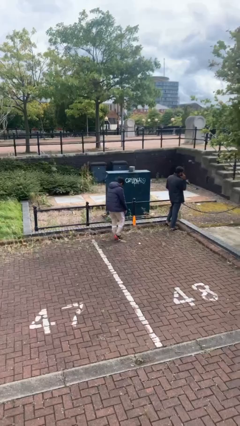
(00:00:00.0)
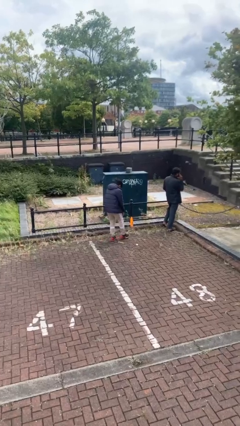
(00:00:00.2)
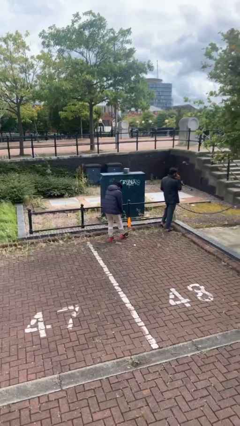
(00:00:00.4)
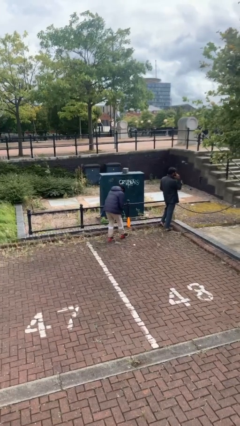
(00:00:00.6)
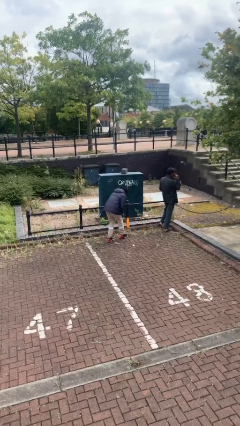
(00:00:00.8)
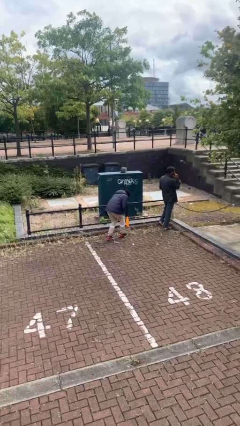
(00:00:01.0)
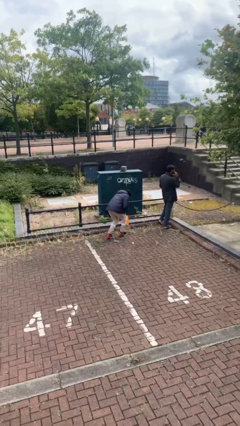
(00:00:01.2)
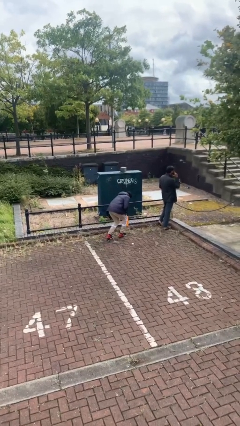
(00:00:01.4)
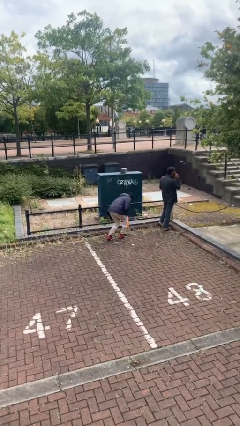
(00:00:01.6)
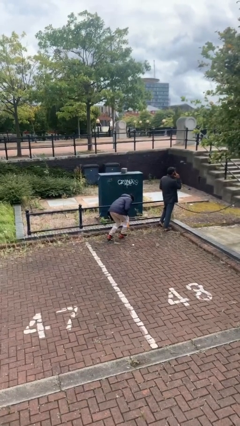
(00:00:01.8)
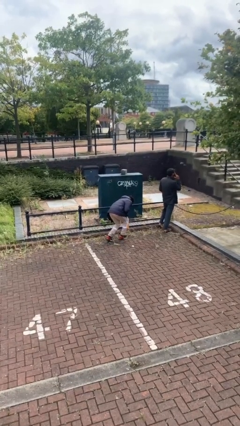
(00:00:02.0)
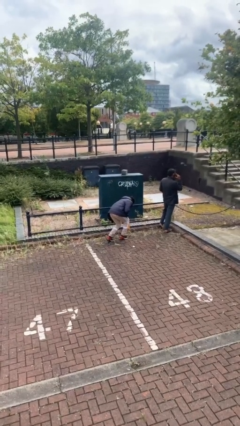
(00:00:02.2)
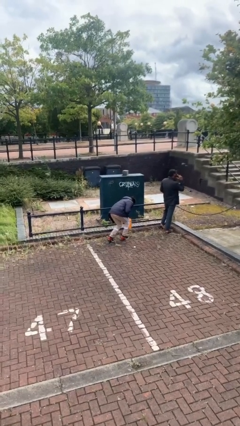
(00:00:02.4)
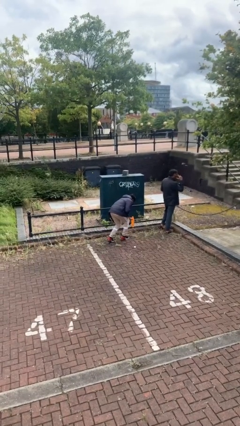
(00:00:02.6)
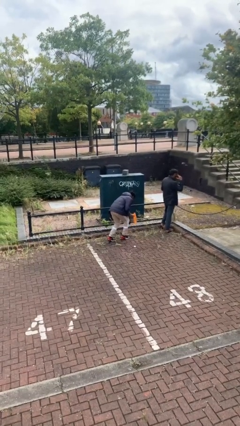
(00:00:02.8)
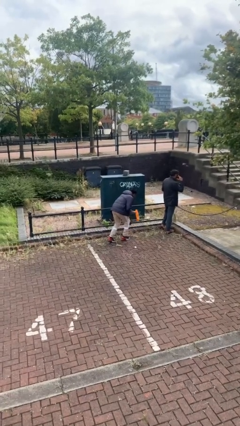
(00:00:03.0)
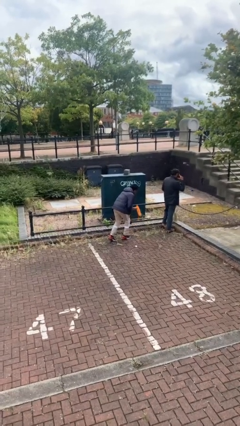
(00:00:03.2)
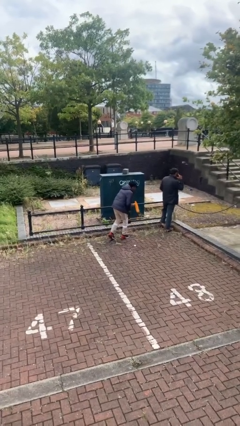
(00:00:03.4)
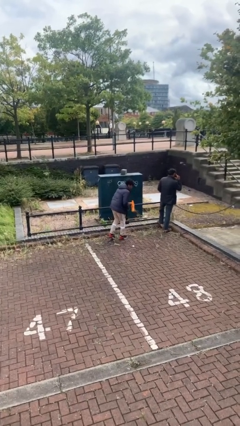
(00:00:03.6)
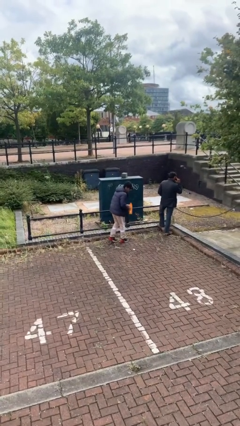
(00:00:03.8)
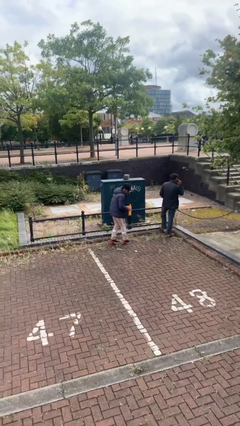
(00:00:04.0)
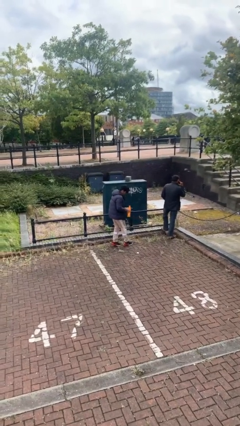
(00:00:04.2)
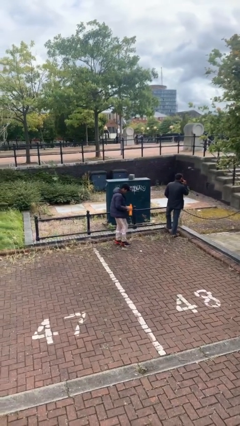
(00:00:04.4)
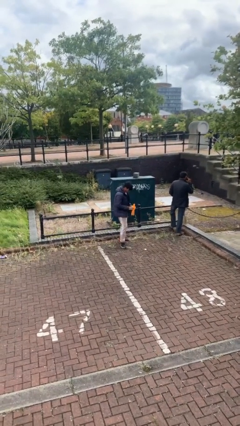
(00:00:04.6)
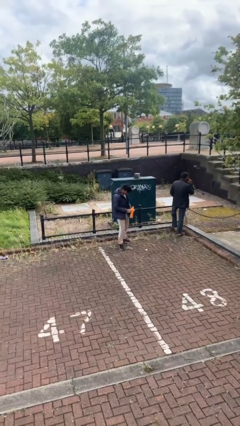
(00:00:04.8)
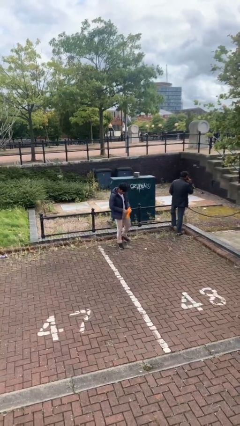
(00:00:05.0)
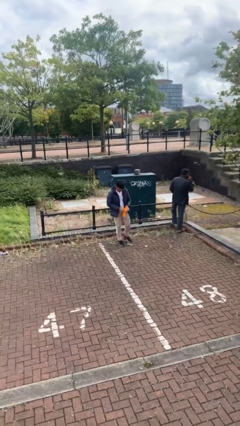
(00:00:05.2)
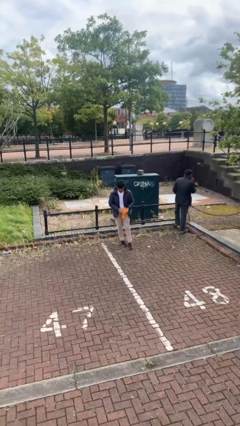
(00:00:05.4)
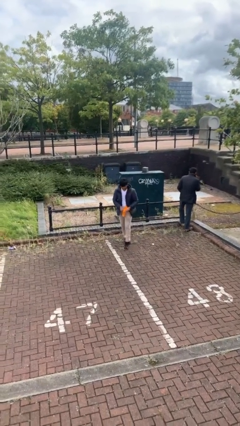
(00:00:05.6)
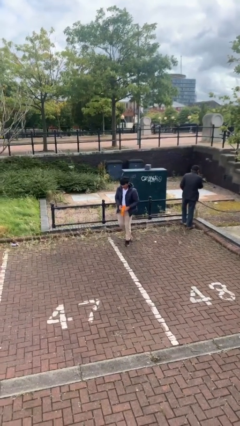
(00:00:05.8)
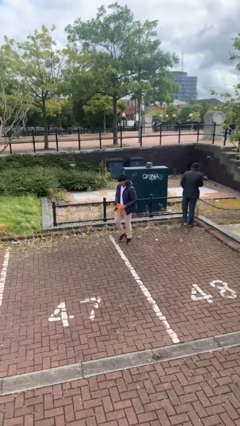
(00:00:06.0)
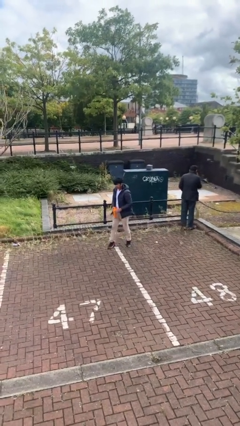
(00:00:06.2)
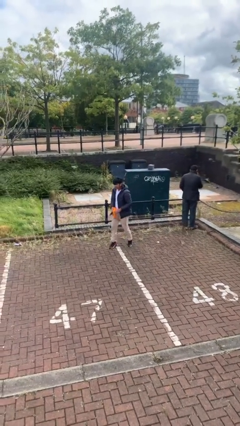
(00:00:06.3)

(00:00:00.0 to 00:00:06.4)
person steals object from person

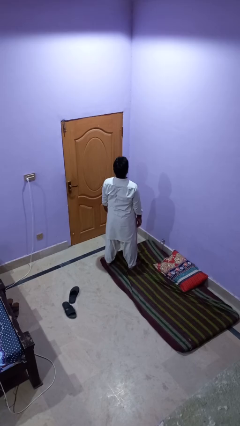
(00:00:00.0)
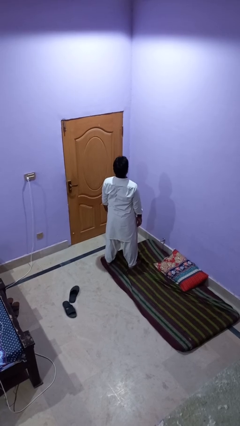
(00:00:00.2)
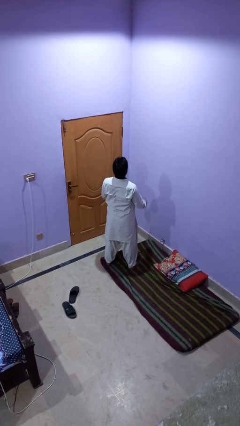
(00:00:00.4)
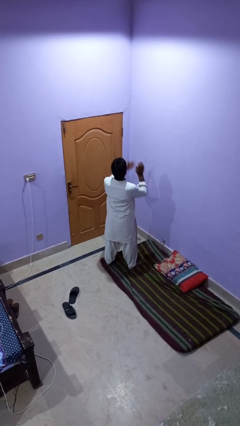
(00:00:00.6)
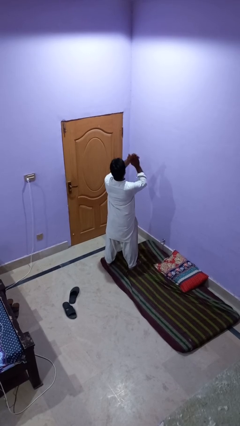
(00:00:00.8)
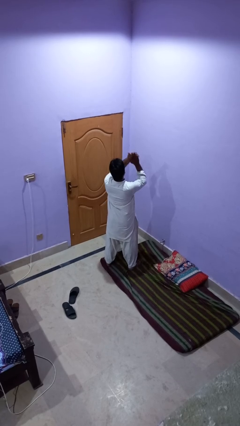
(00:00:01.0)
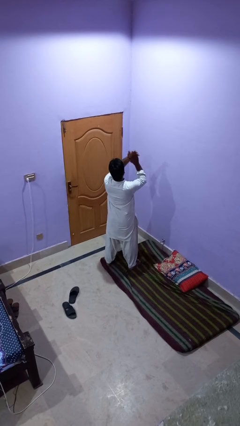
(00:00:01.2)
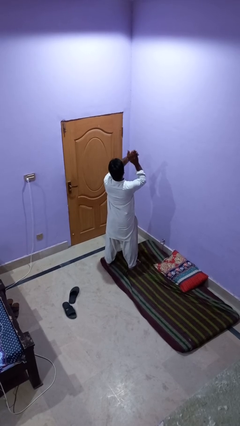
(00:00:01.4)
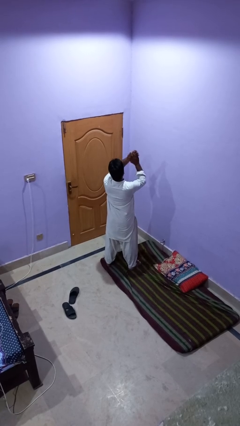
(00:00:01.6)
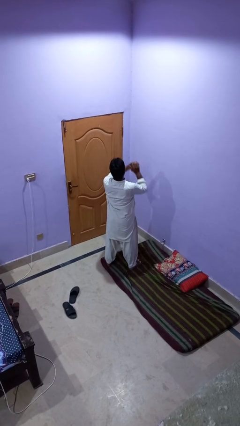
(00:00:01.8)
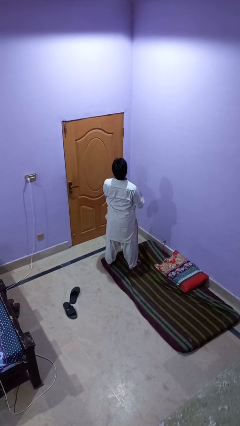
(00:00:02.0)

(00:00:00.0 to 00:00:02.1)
person claps hands

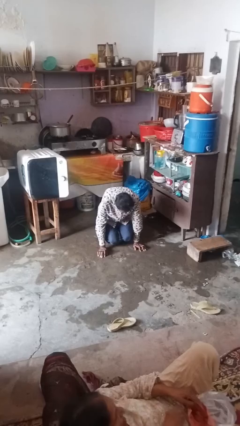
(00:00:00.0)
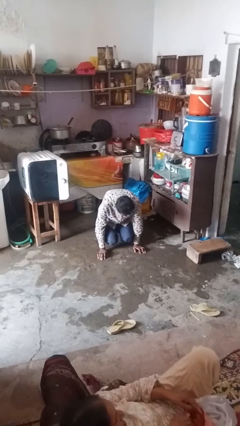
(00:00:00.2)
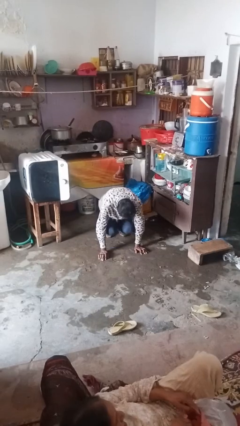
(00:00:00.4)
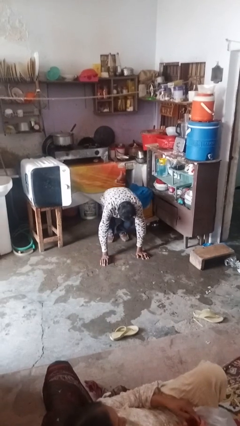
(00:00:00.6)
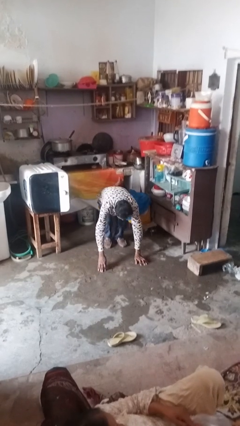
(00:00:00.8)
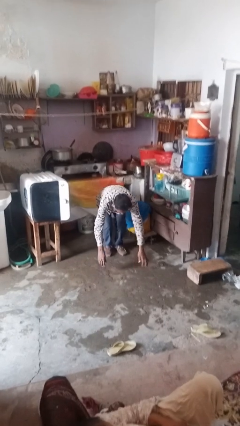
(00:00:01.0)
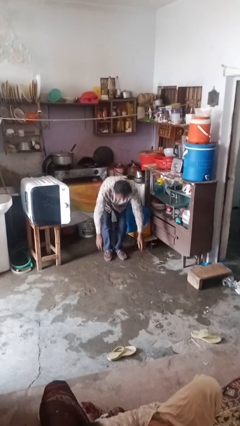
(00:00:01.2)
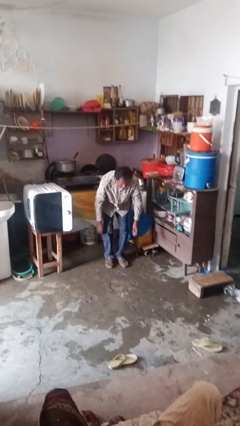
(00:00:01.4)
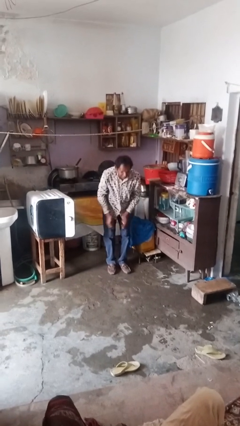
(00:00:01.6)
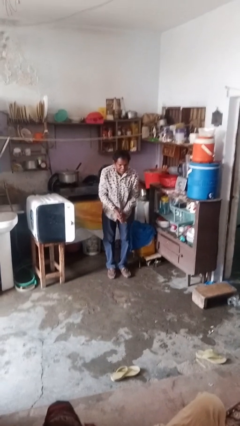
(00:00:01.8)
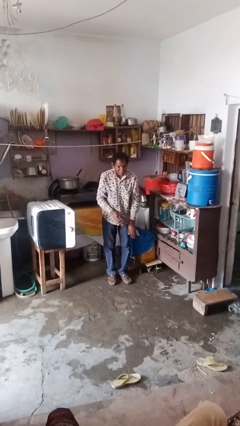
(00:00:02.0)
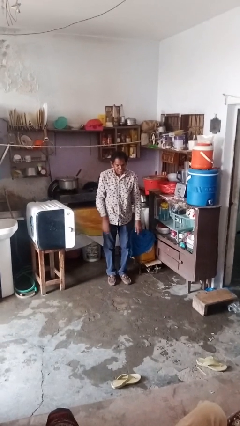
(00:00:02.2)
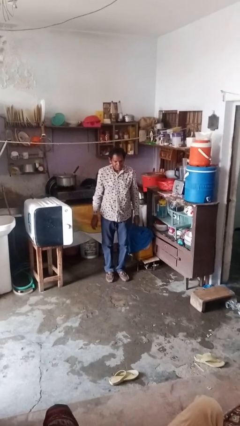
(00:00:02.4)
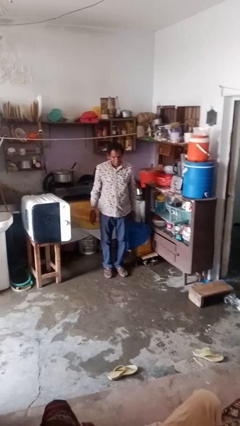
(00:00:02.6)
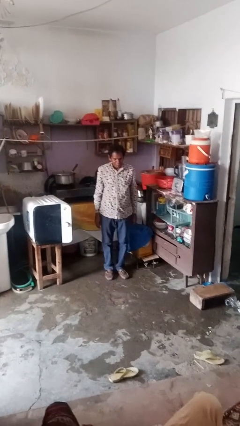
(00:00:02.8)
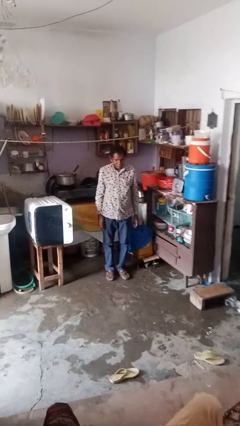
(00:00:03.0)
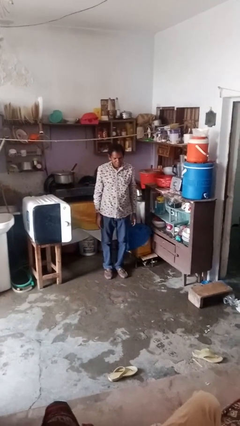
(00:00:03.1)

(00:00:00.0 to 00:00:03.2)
person stands up from floor

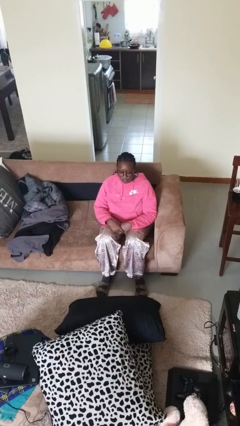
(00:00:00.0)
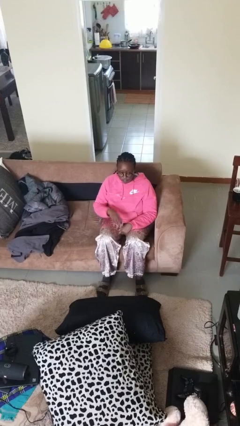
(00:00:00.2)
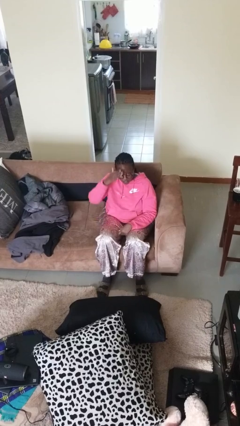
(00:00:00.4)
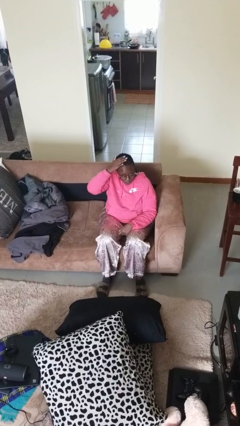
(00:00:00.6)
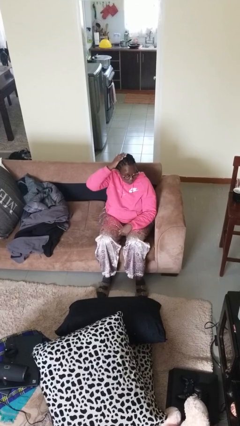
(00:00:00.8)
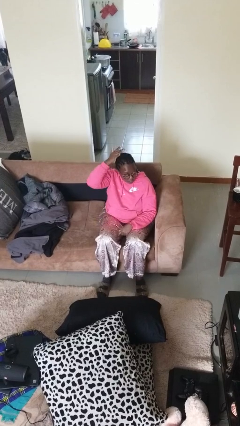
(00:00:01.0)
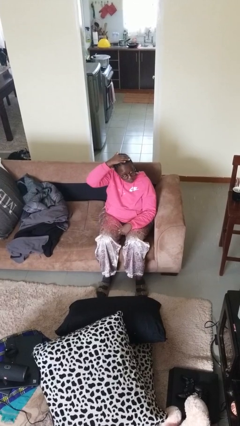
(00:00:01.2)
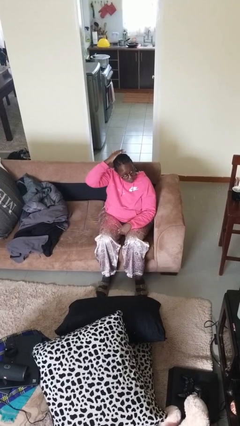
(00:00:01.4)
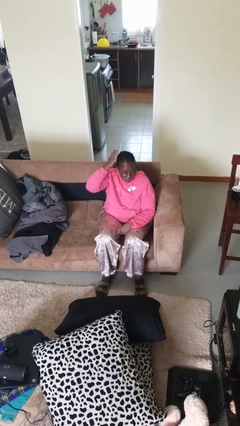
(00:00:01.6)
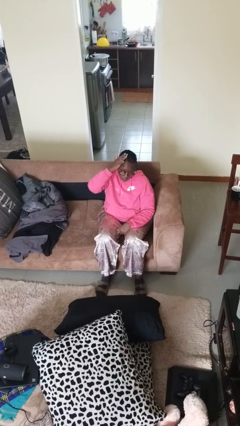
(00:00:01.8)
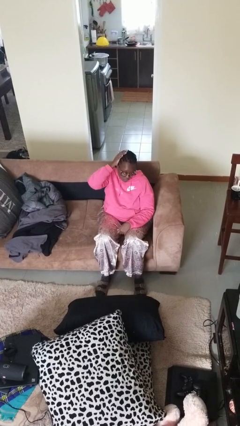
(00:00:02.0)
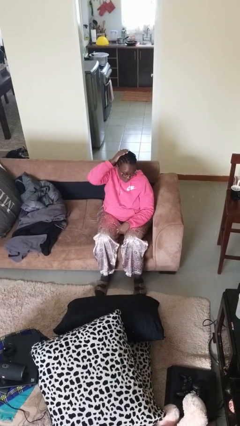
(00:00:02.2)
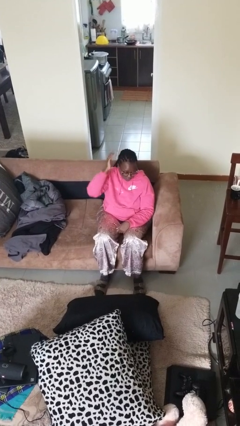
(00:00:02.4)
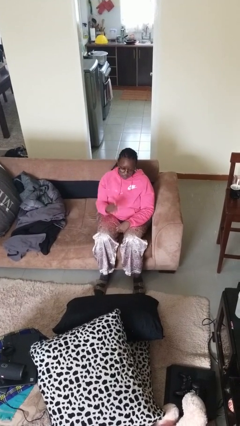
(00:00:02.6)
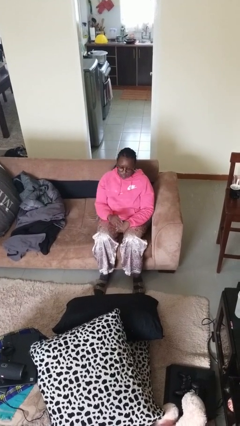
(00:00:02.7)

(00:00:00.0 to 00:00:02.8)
person strokes hair

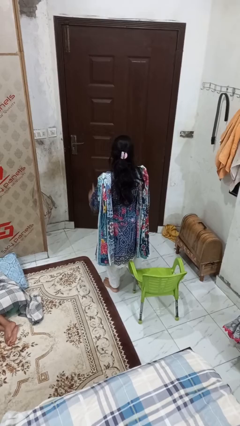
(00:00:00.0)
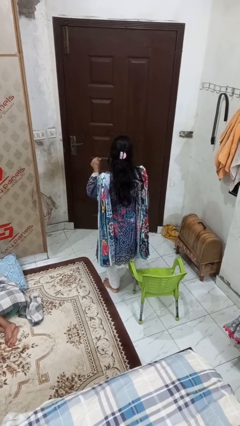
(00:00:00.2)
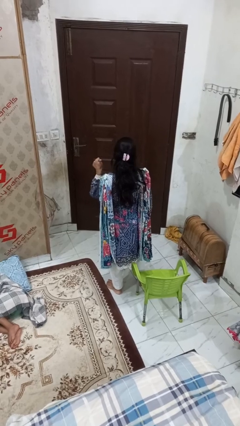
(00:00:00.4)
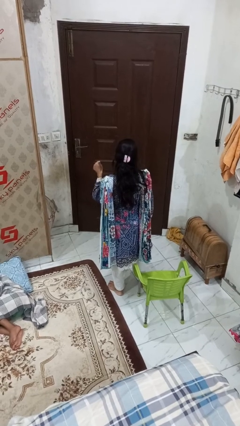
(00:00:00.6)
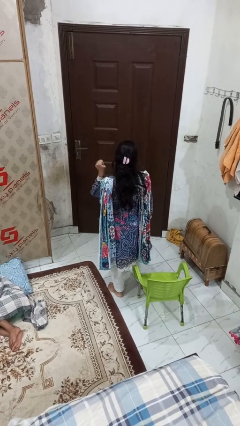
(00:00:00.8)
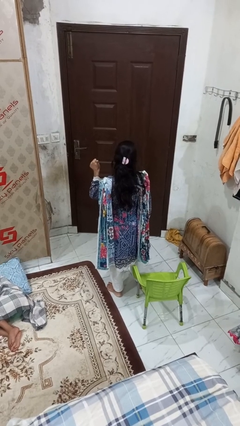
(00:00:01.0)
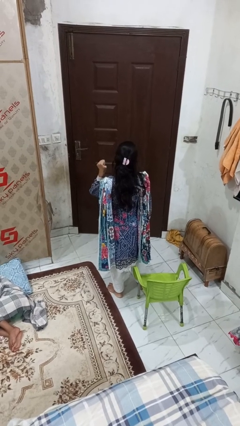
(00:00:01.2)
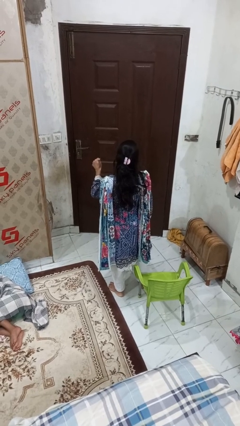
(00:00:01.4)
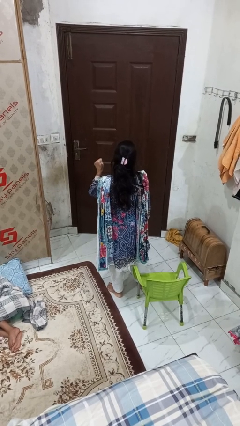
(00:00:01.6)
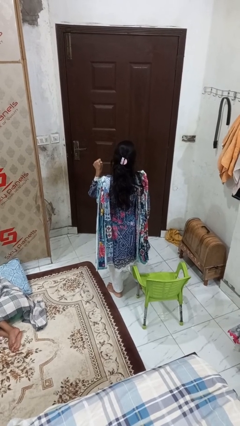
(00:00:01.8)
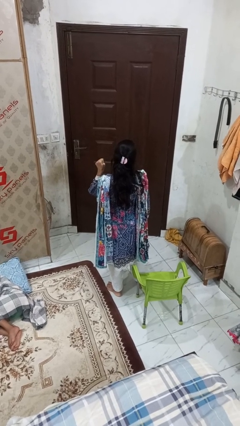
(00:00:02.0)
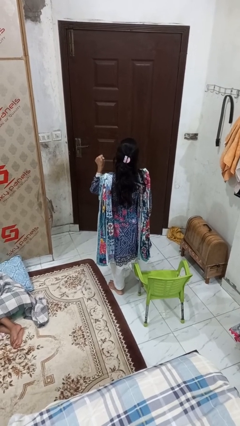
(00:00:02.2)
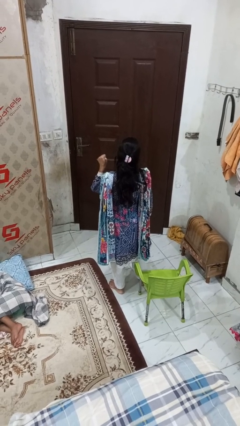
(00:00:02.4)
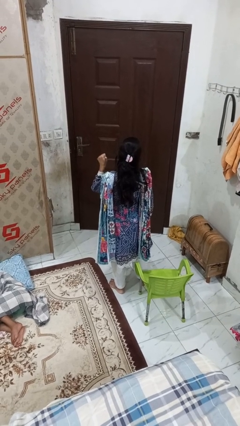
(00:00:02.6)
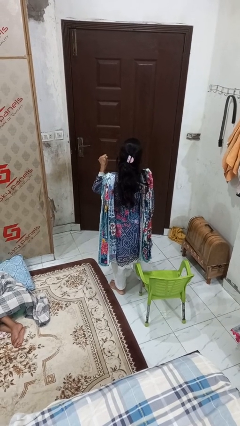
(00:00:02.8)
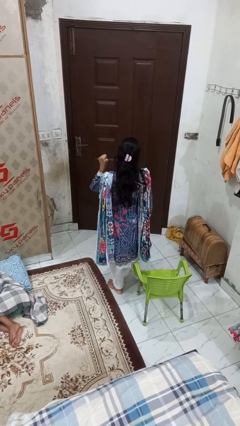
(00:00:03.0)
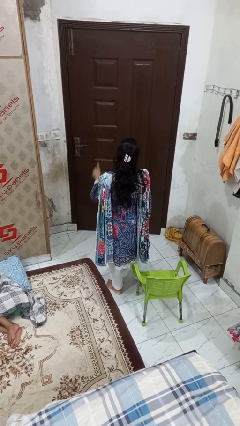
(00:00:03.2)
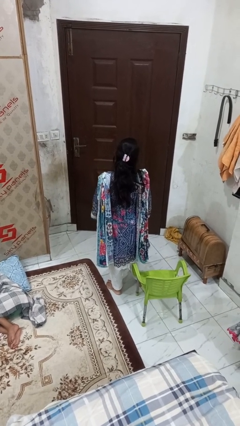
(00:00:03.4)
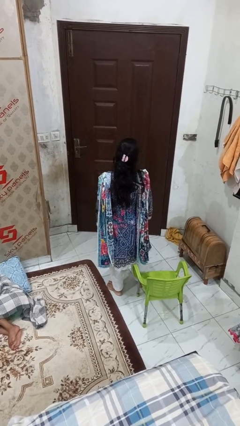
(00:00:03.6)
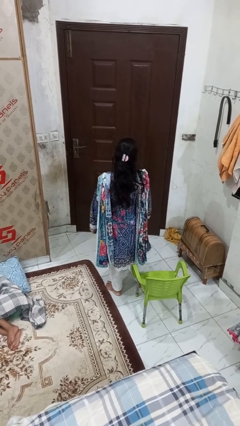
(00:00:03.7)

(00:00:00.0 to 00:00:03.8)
person gestures behind me
